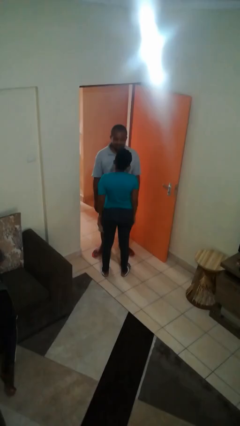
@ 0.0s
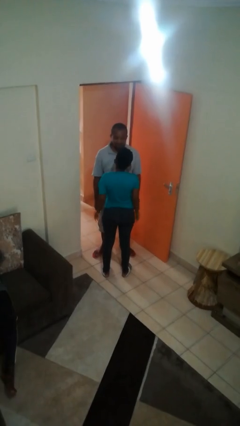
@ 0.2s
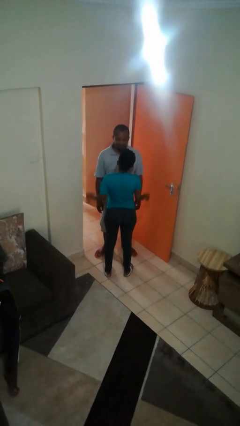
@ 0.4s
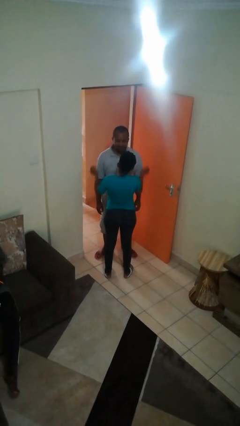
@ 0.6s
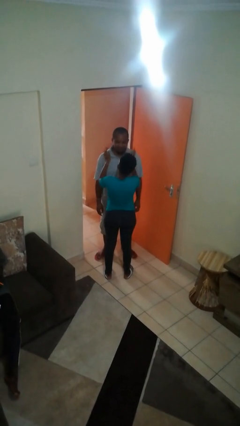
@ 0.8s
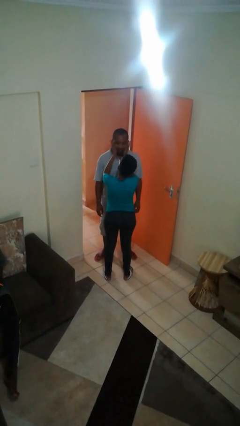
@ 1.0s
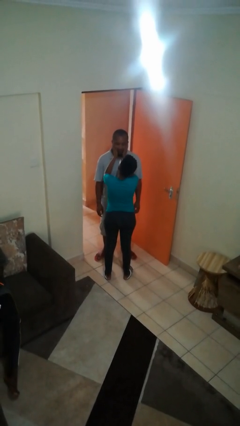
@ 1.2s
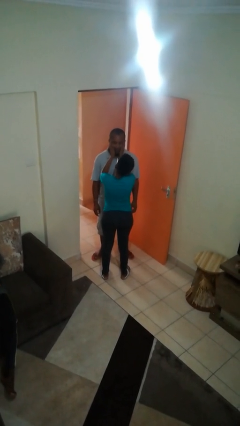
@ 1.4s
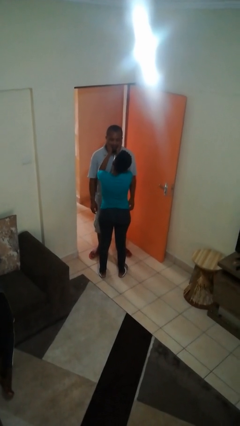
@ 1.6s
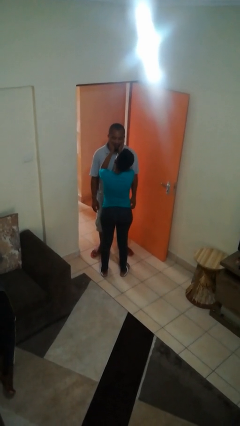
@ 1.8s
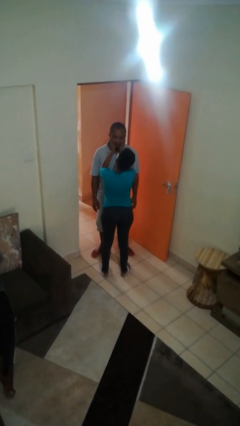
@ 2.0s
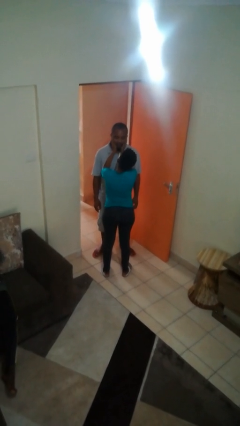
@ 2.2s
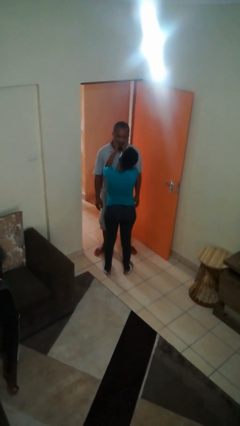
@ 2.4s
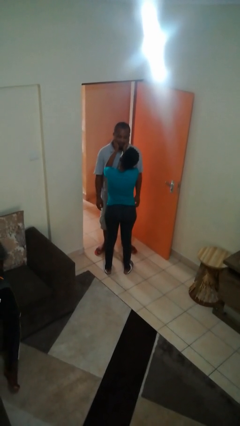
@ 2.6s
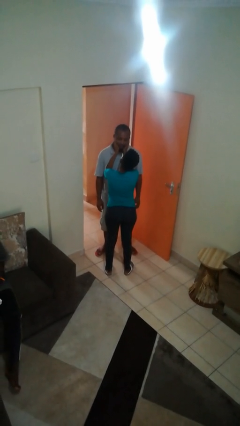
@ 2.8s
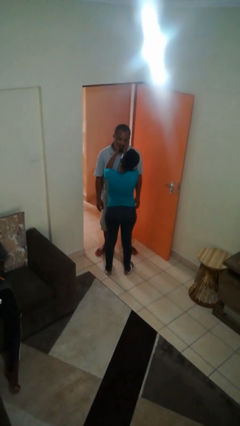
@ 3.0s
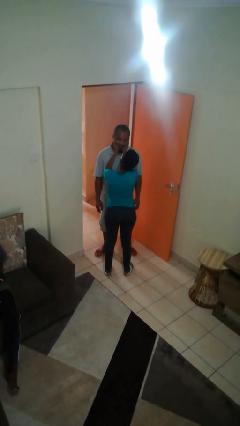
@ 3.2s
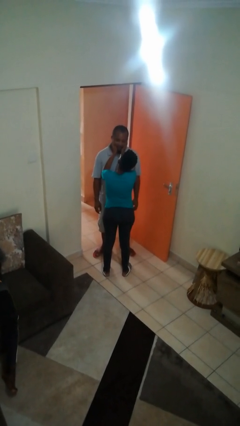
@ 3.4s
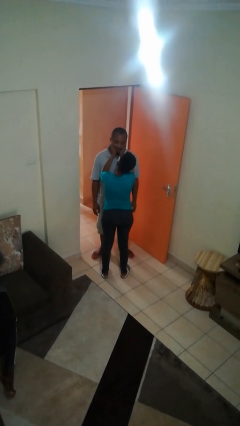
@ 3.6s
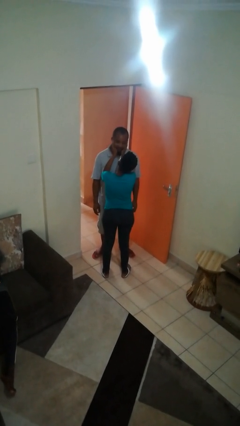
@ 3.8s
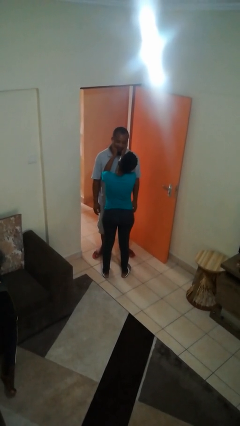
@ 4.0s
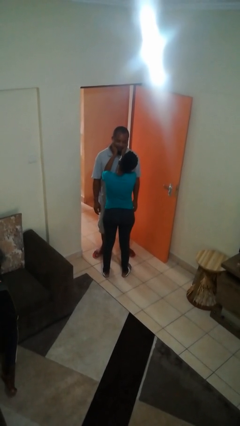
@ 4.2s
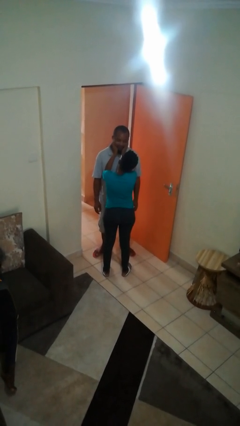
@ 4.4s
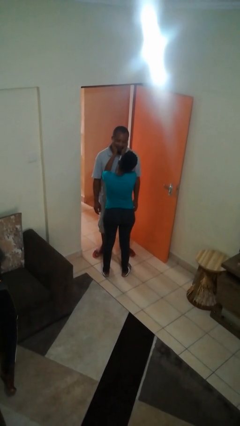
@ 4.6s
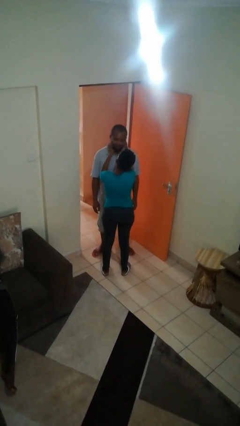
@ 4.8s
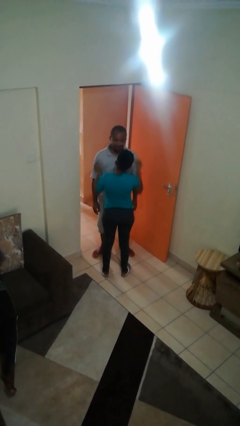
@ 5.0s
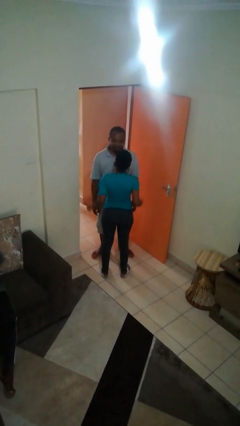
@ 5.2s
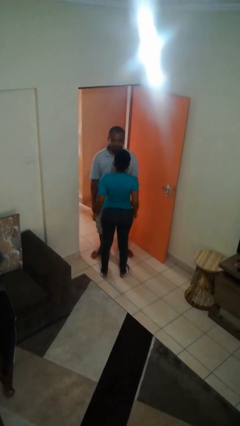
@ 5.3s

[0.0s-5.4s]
person touches face of person

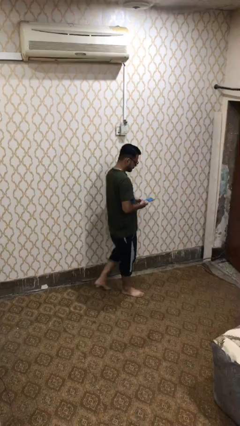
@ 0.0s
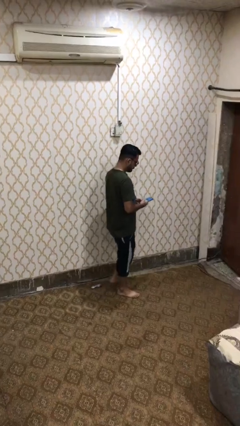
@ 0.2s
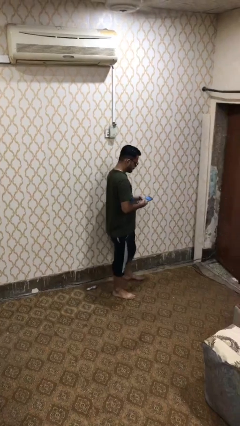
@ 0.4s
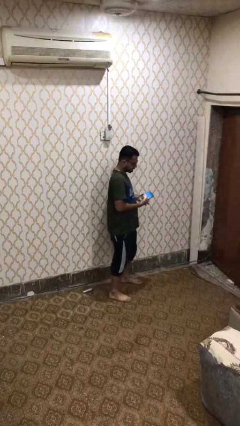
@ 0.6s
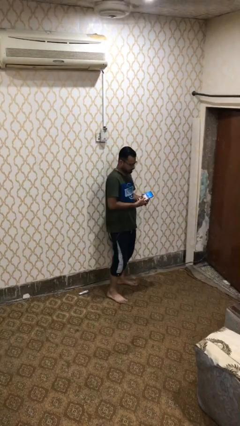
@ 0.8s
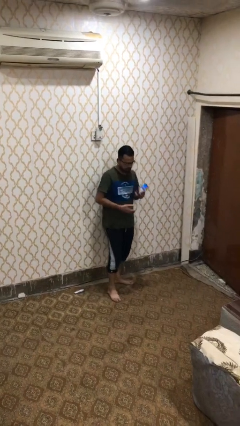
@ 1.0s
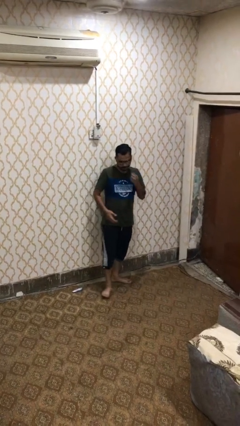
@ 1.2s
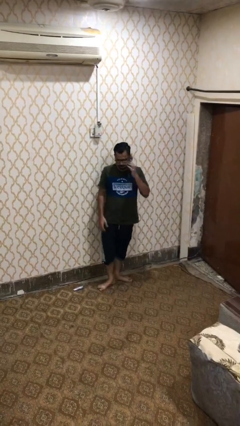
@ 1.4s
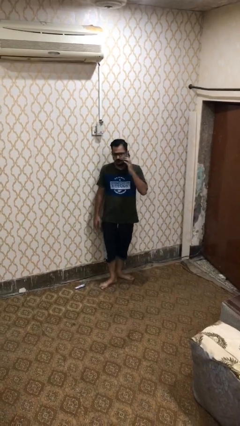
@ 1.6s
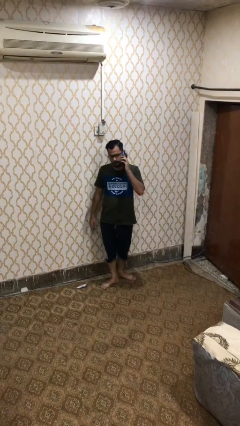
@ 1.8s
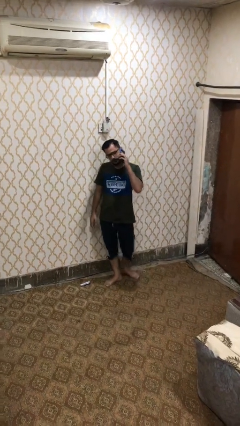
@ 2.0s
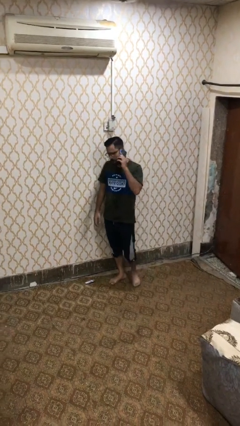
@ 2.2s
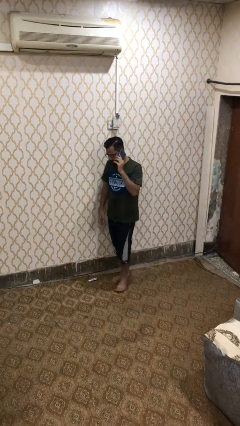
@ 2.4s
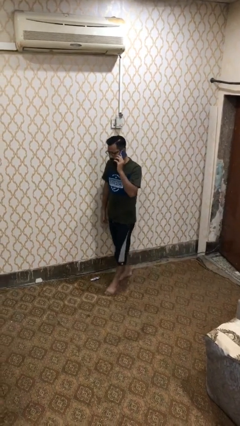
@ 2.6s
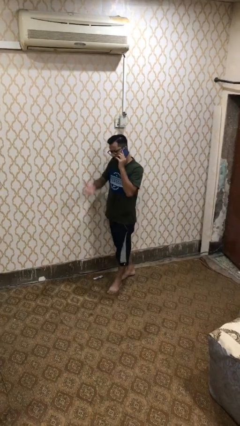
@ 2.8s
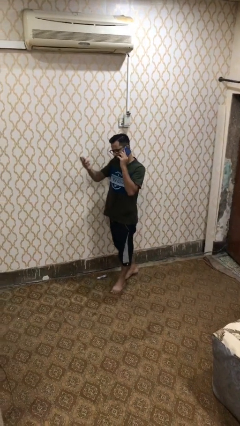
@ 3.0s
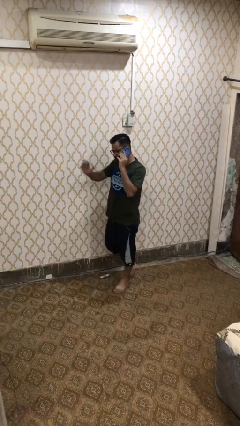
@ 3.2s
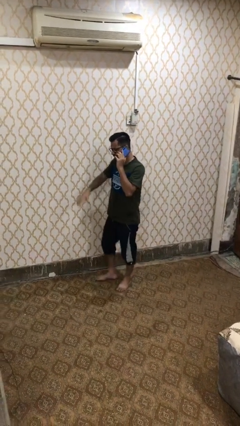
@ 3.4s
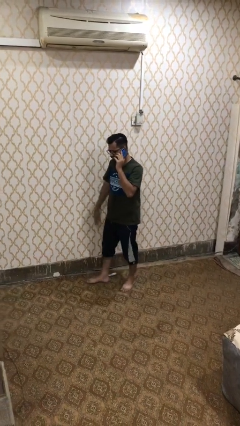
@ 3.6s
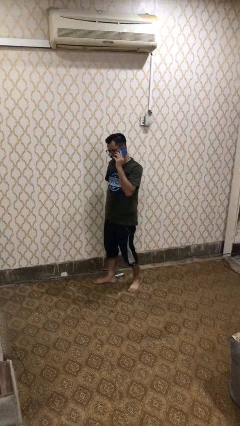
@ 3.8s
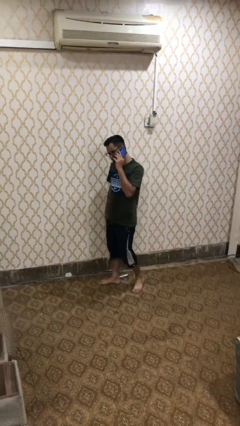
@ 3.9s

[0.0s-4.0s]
person talks on phone

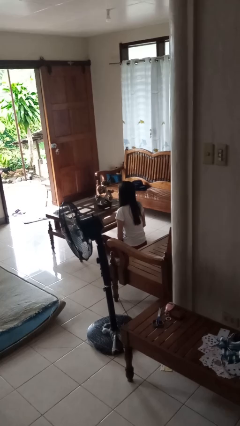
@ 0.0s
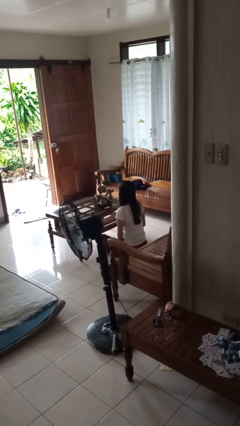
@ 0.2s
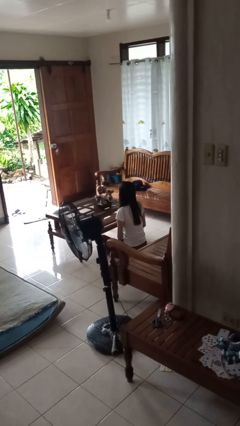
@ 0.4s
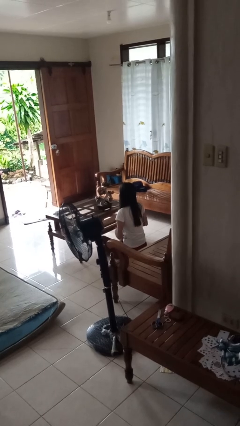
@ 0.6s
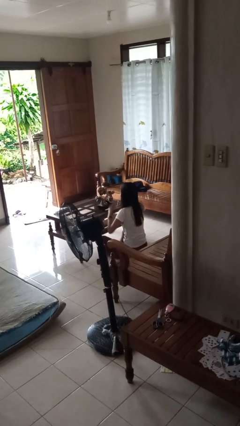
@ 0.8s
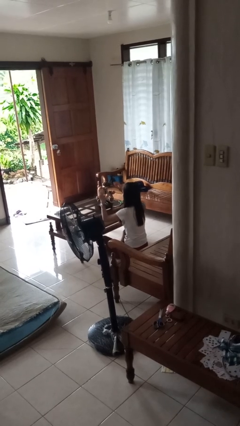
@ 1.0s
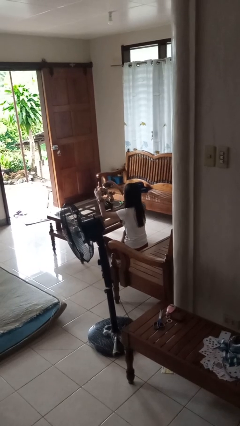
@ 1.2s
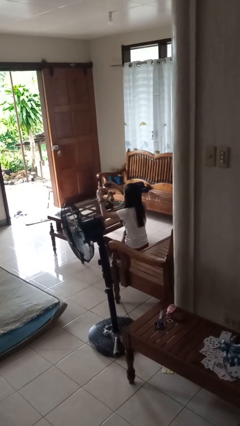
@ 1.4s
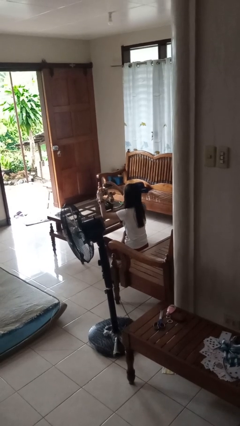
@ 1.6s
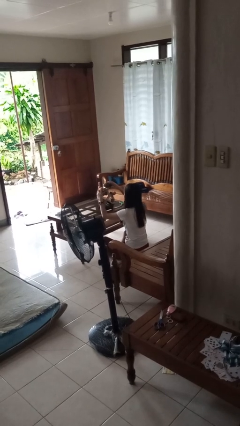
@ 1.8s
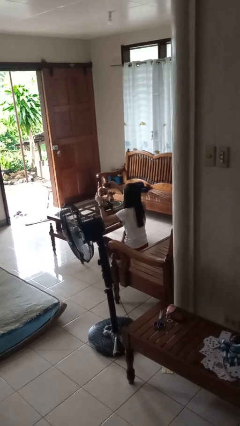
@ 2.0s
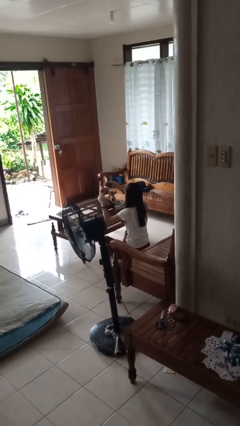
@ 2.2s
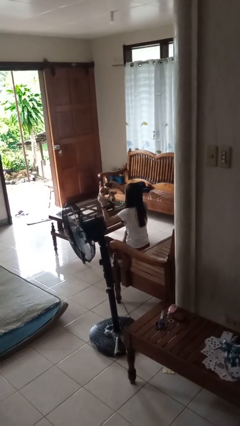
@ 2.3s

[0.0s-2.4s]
person arranges flowers in vase

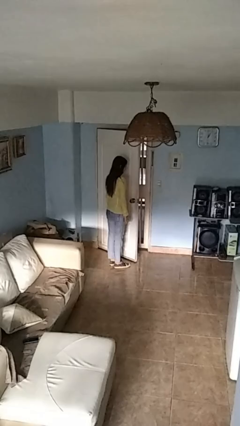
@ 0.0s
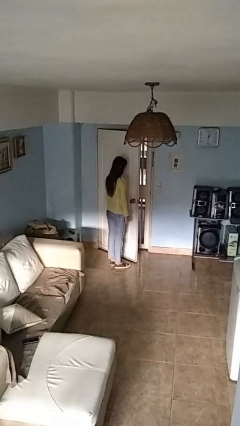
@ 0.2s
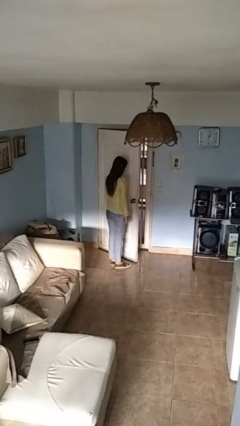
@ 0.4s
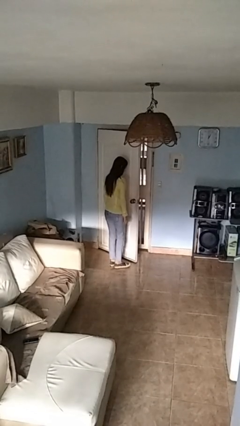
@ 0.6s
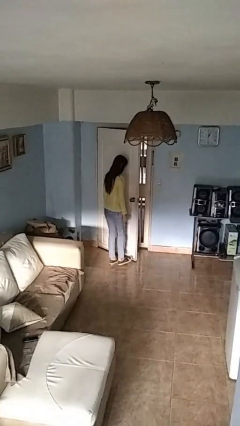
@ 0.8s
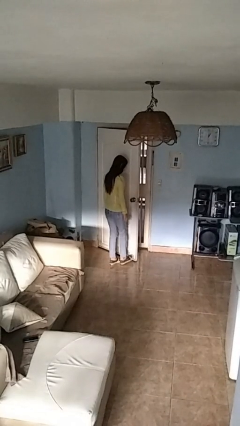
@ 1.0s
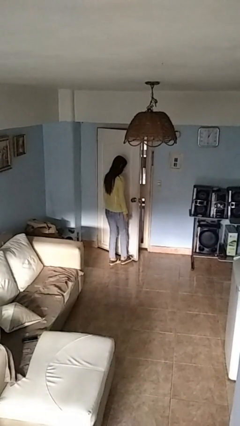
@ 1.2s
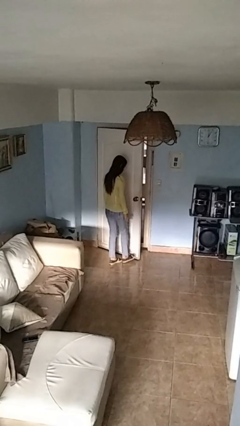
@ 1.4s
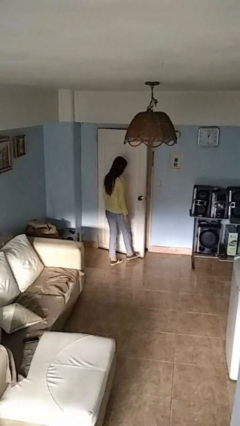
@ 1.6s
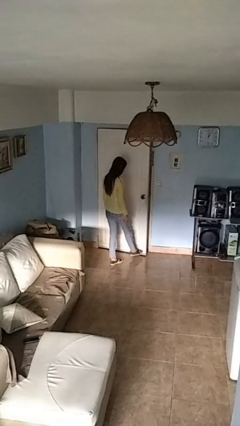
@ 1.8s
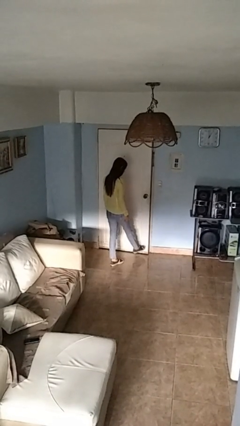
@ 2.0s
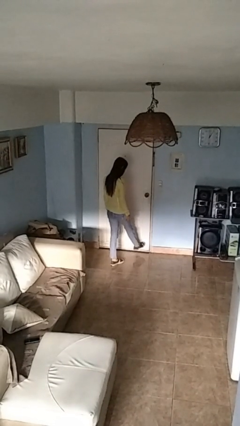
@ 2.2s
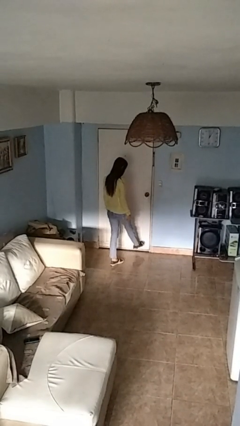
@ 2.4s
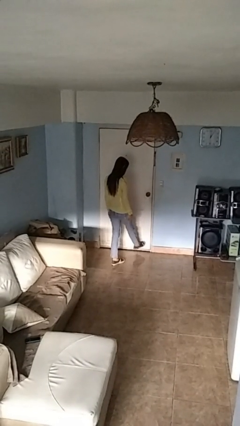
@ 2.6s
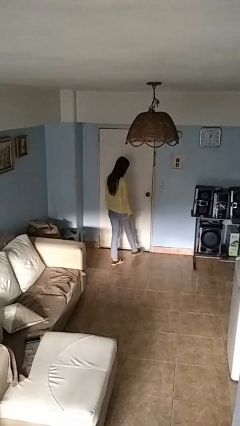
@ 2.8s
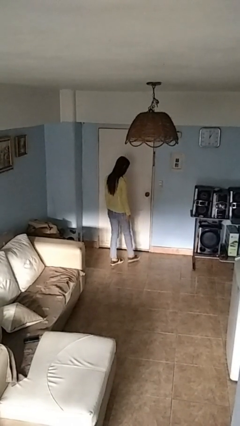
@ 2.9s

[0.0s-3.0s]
person closes door with foot

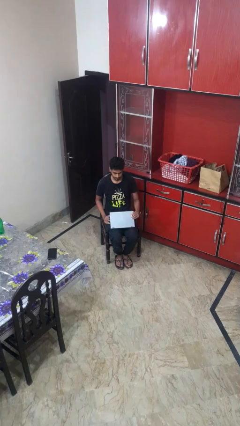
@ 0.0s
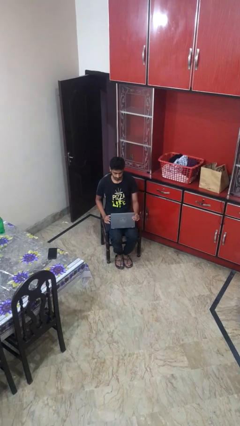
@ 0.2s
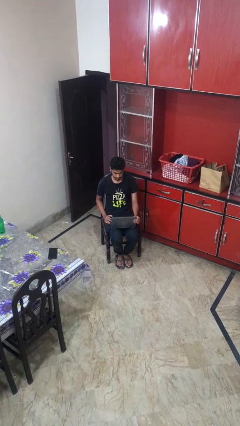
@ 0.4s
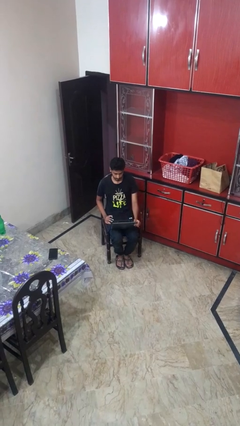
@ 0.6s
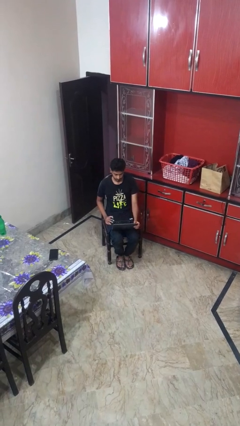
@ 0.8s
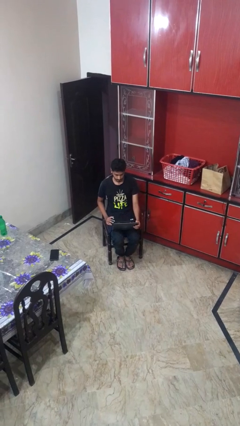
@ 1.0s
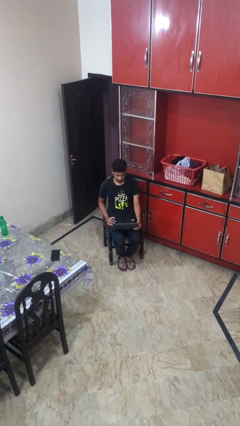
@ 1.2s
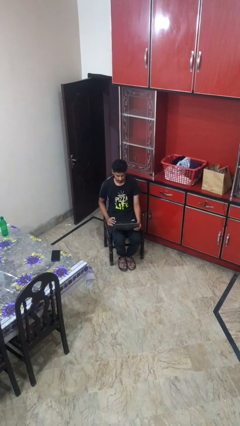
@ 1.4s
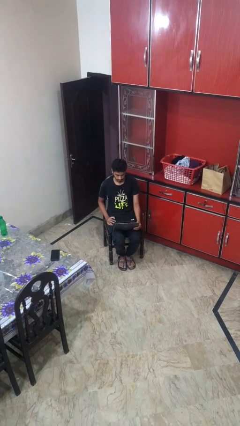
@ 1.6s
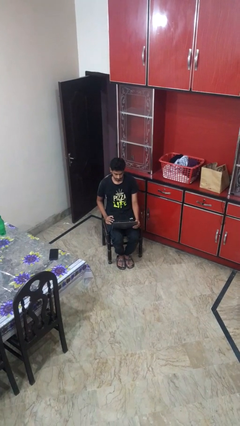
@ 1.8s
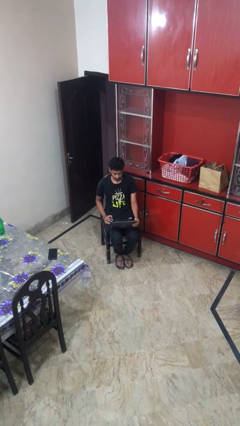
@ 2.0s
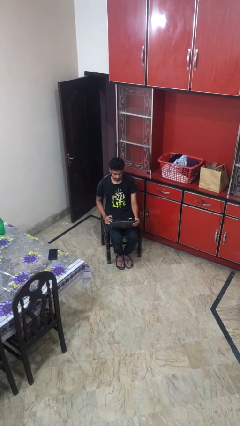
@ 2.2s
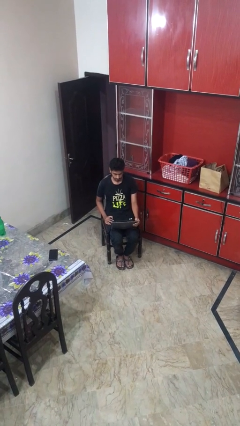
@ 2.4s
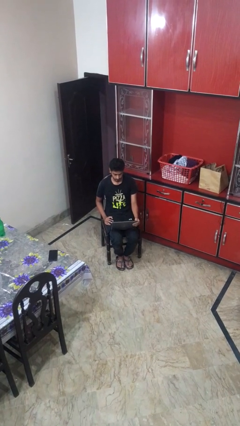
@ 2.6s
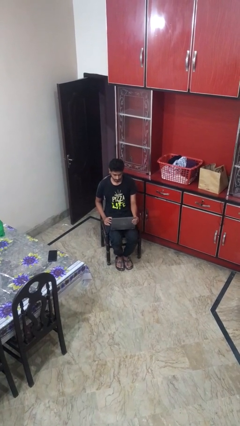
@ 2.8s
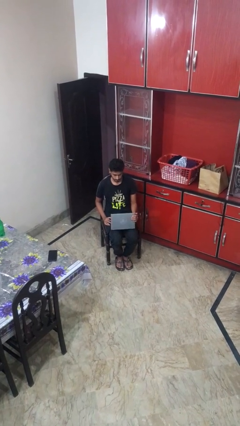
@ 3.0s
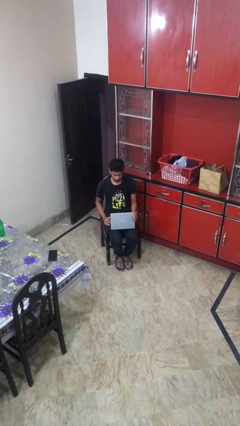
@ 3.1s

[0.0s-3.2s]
person opens laptop
